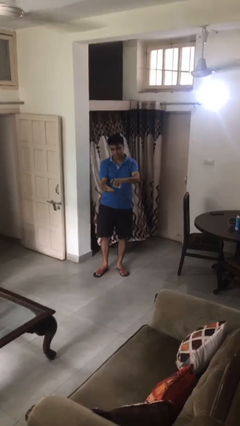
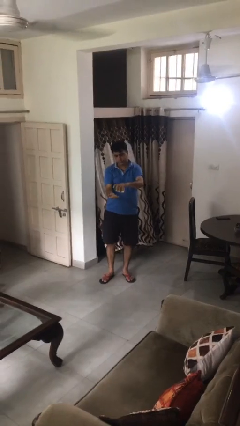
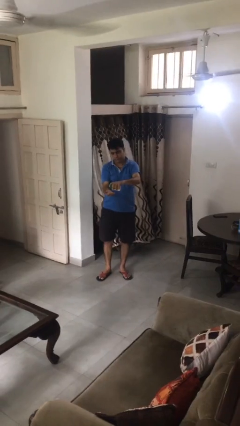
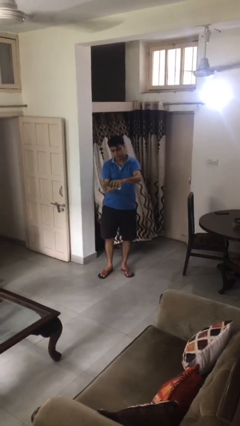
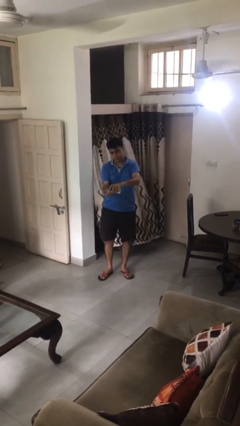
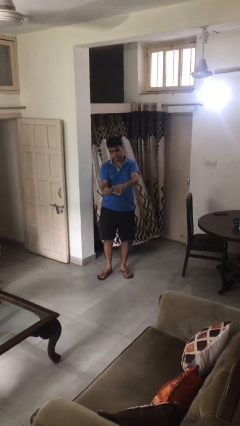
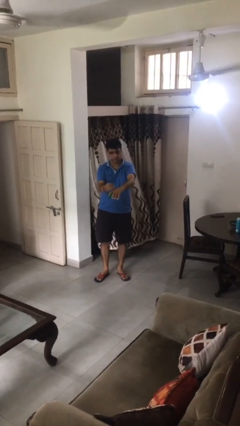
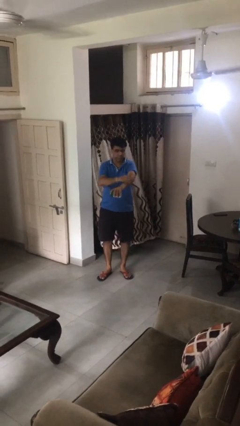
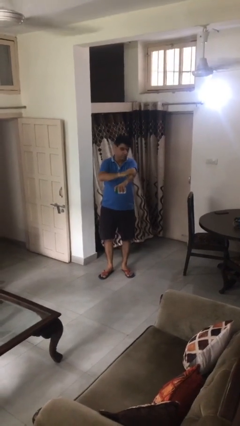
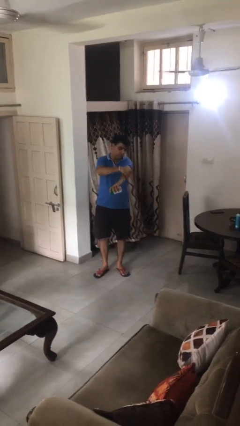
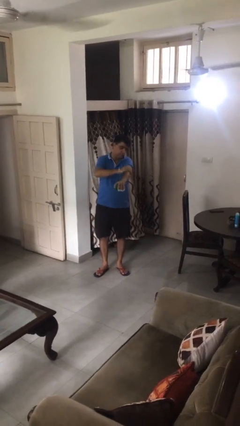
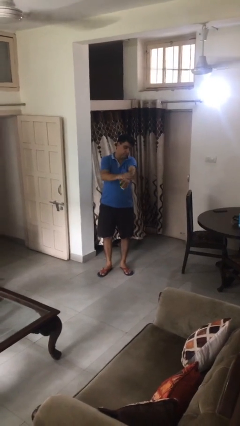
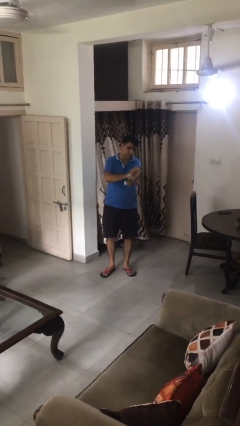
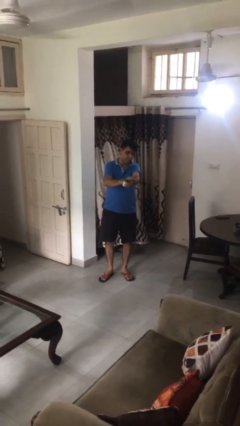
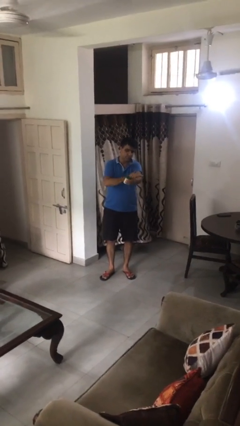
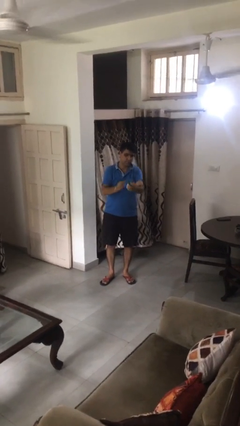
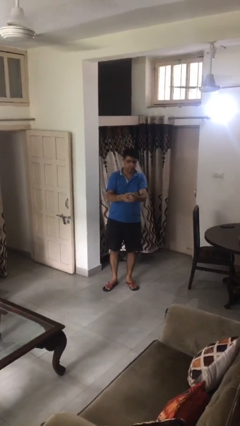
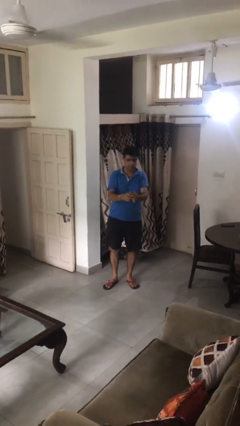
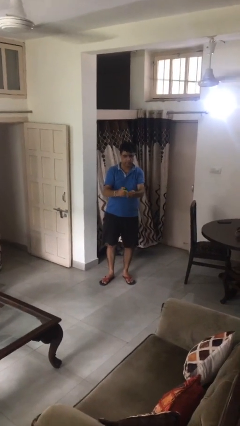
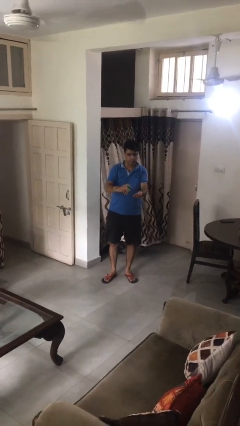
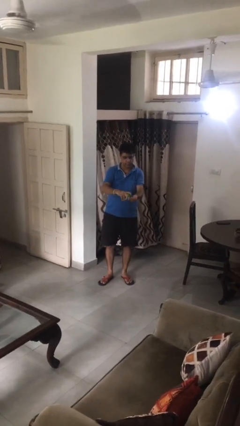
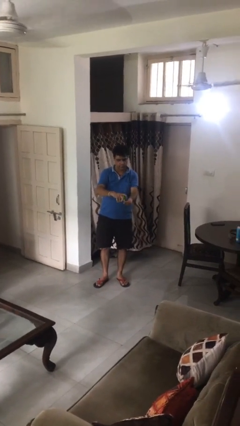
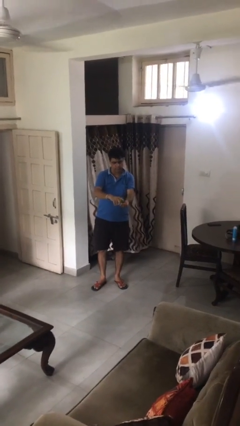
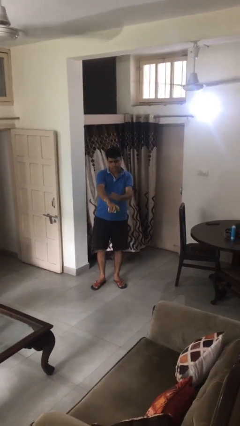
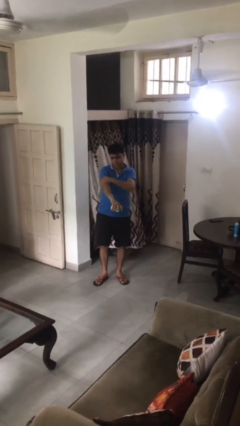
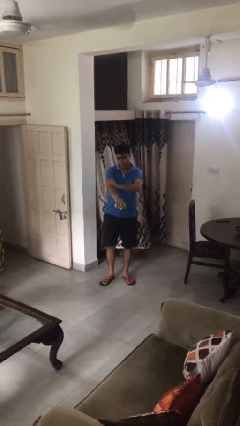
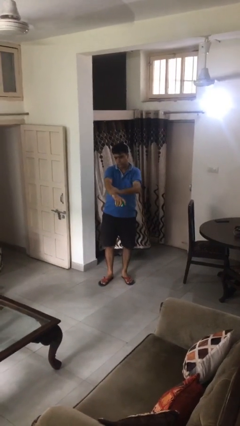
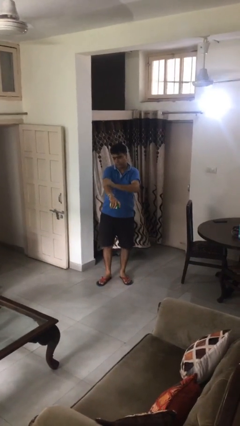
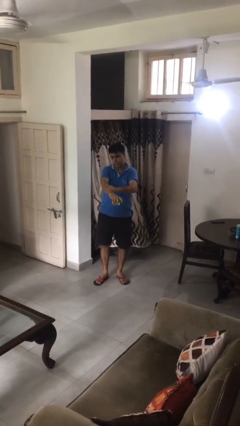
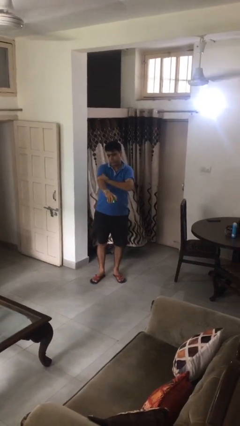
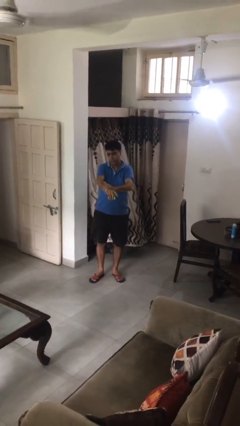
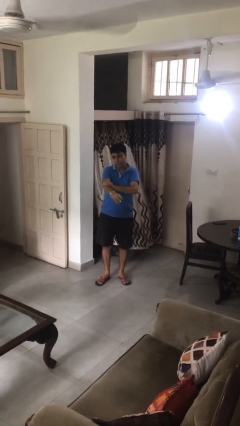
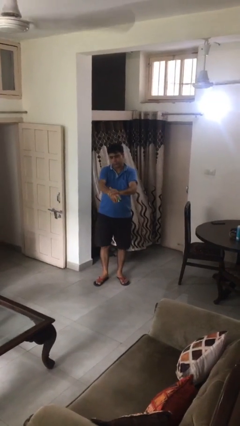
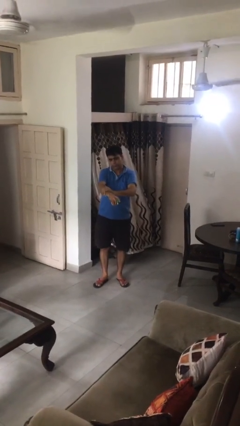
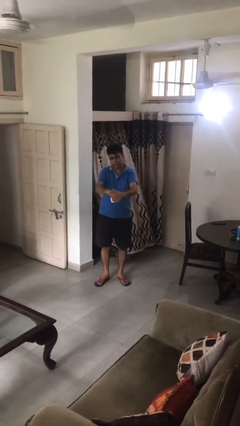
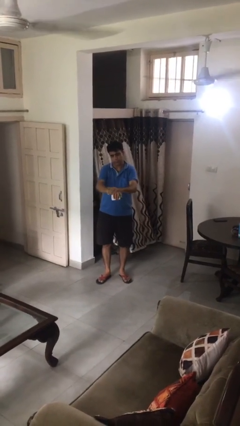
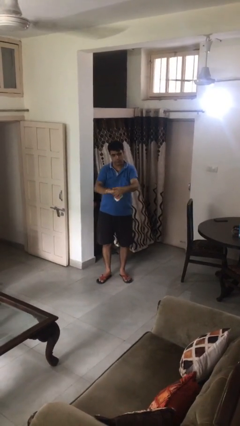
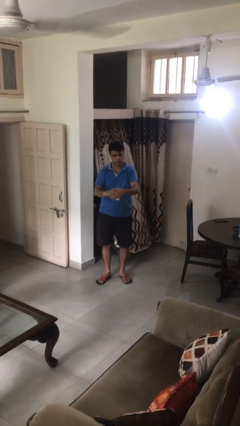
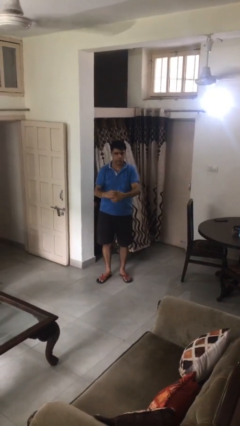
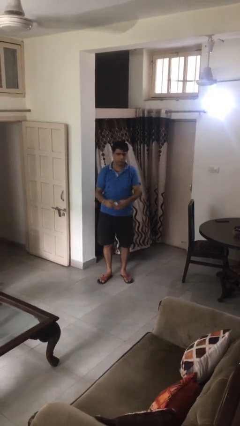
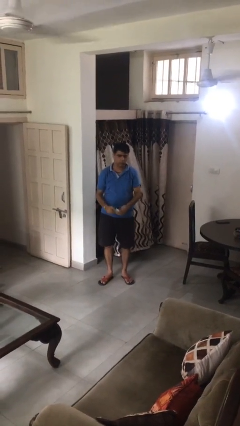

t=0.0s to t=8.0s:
person applies sunscreen

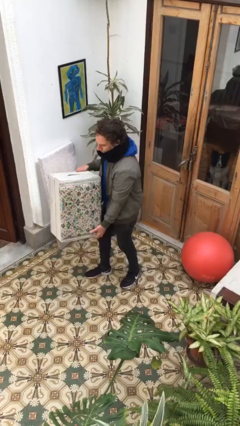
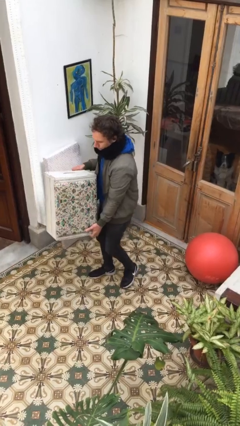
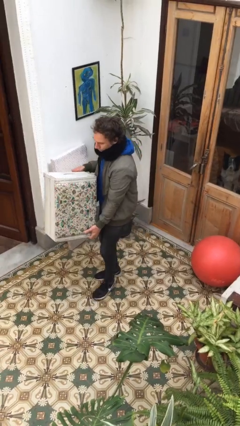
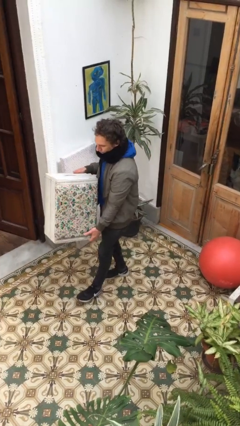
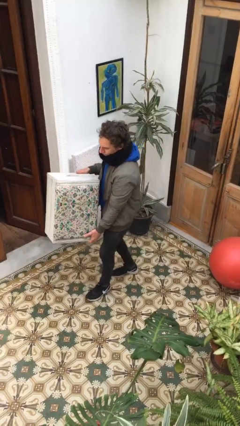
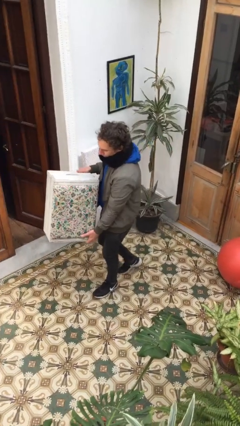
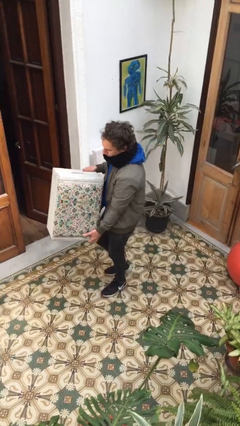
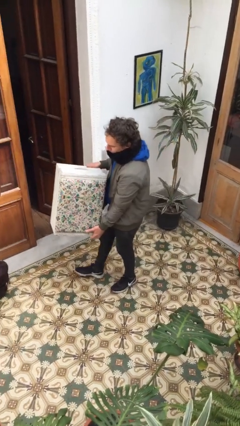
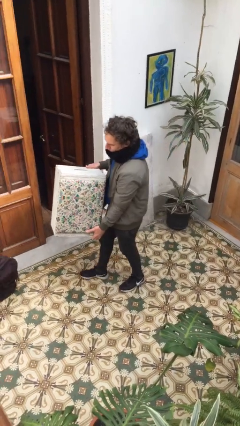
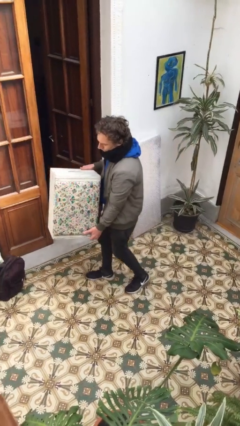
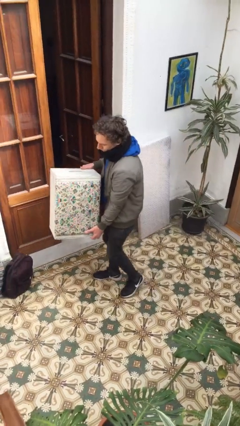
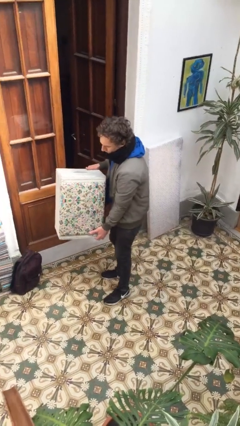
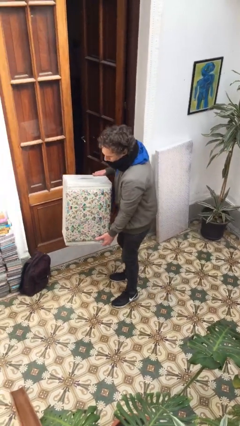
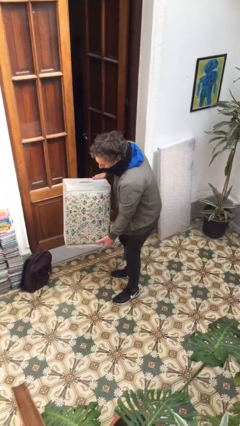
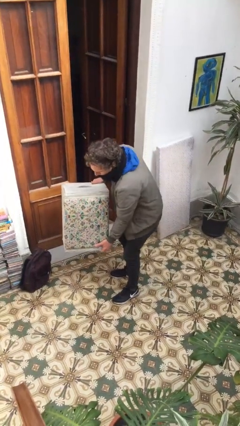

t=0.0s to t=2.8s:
person carries heavy object

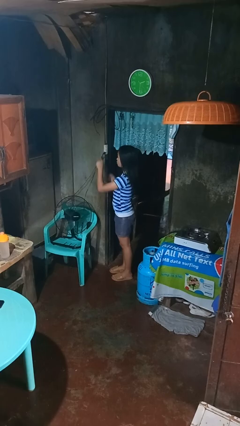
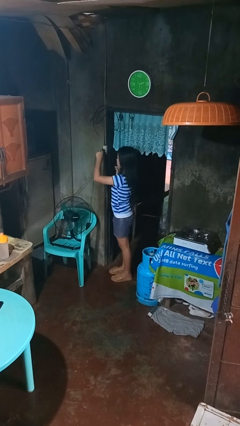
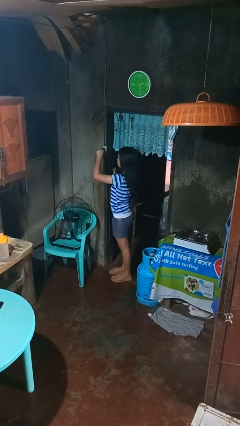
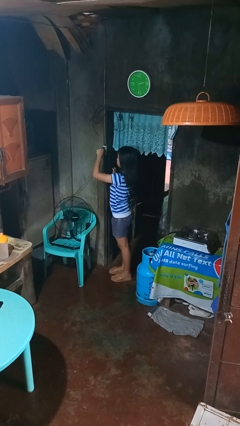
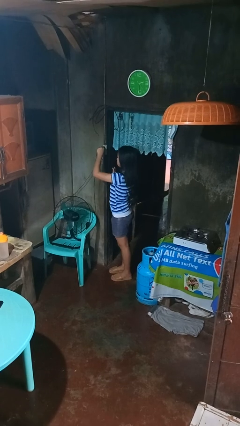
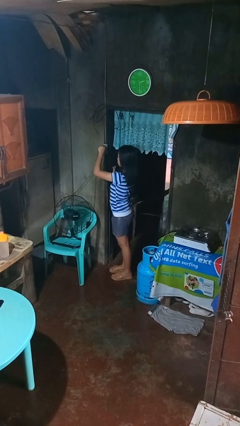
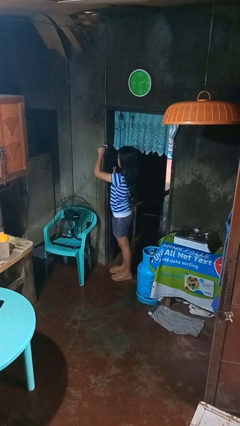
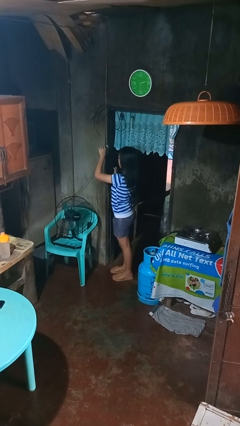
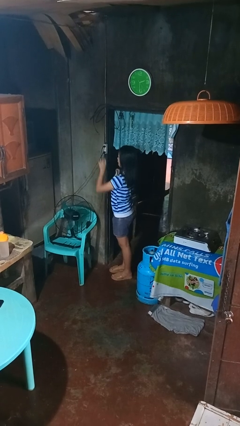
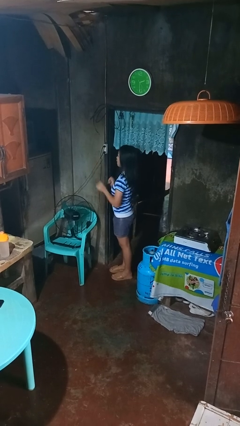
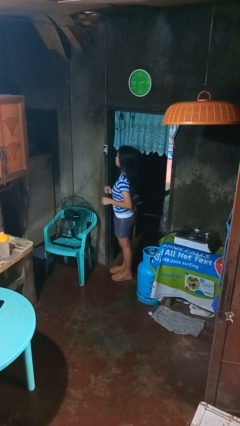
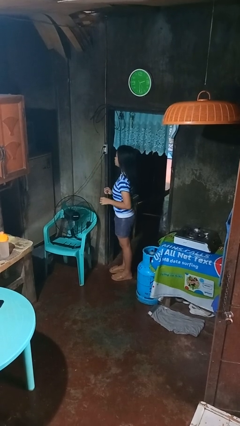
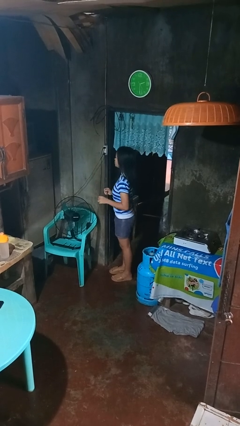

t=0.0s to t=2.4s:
person plugs into electrical socket

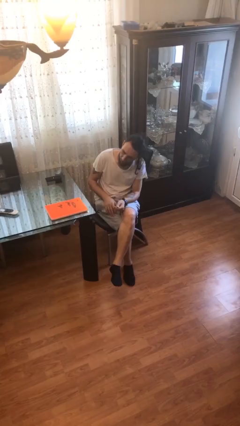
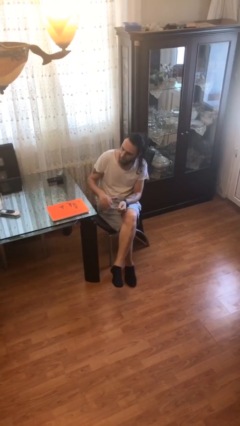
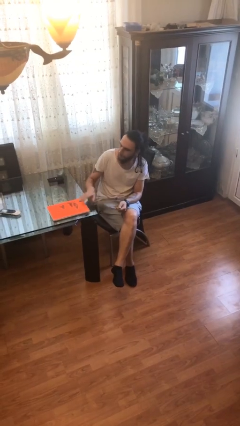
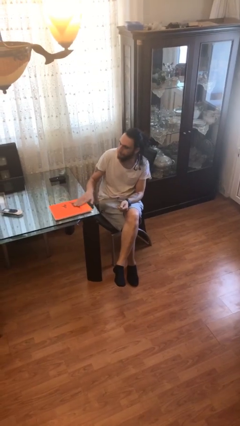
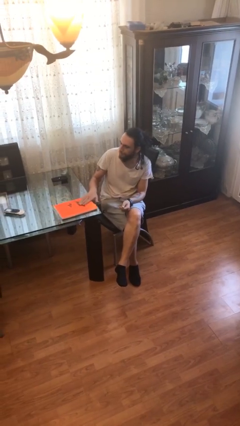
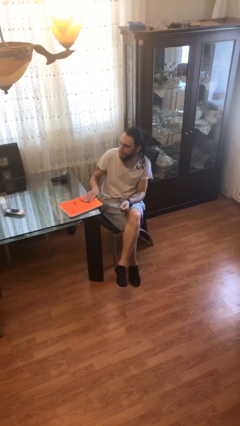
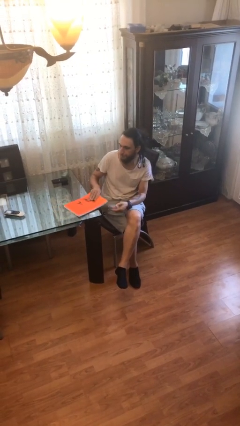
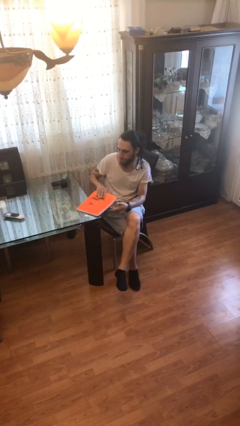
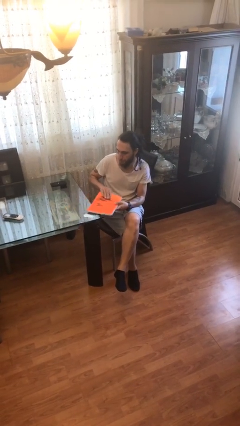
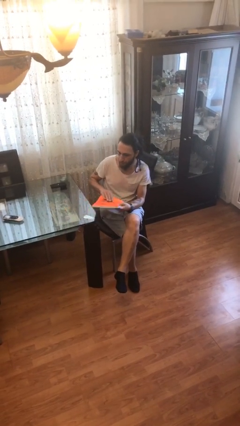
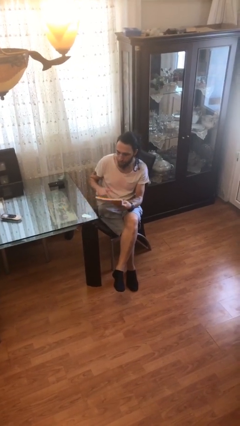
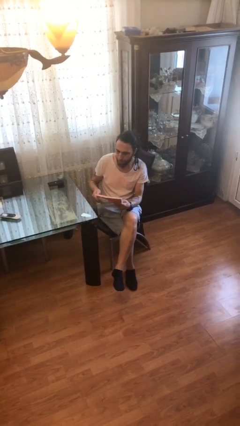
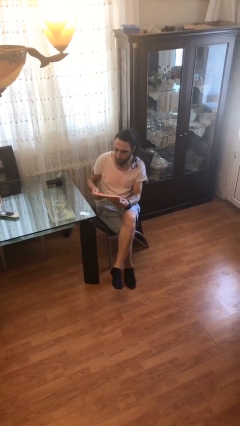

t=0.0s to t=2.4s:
person picks up object from table

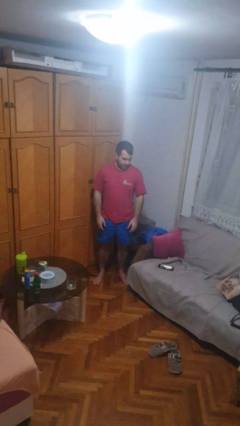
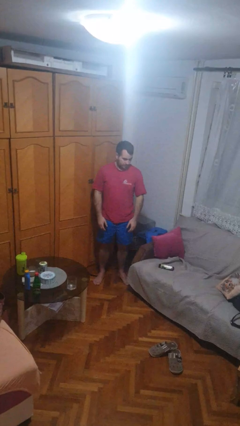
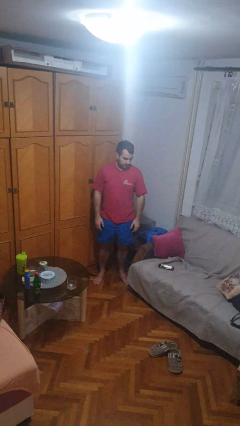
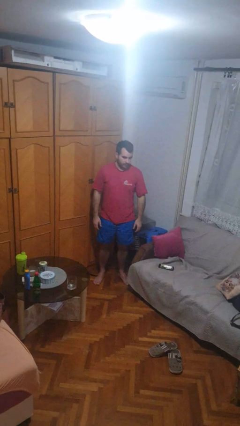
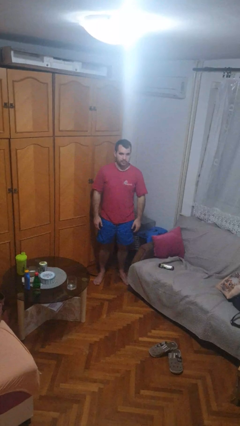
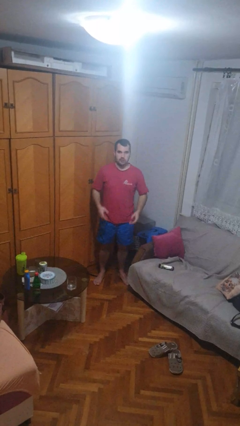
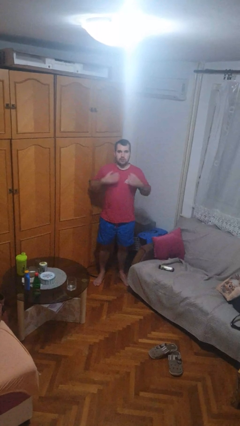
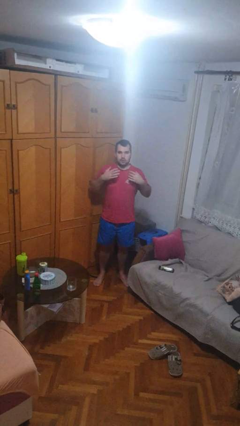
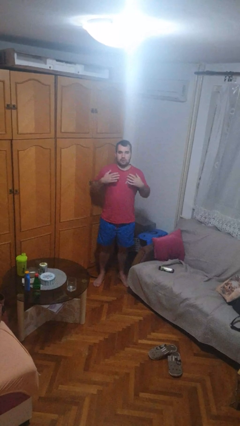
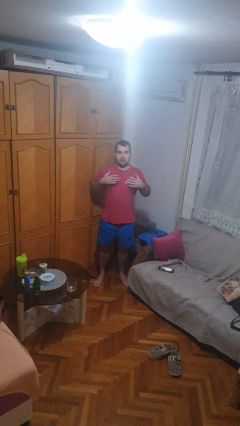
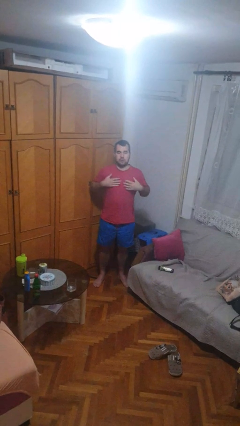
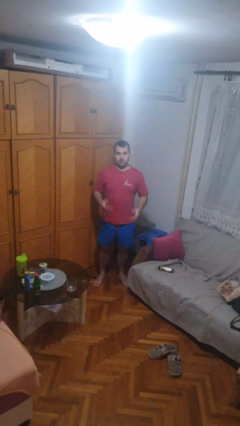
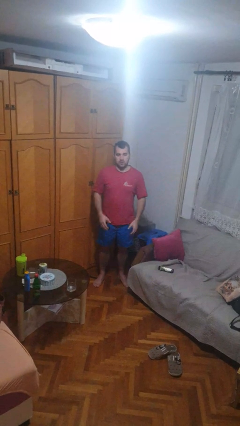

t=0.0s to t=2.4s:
person drums on chest
